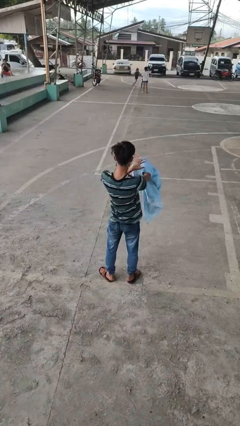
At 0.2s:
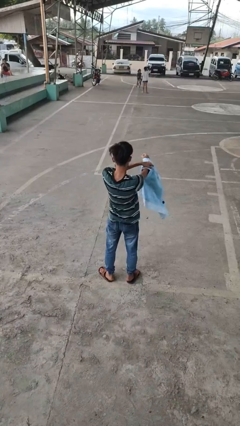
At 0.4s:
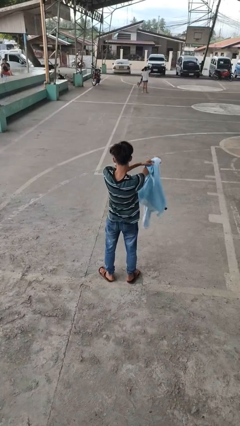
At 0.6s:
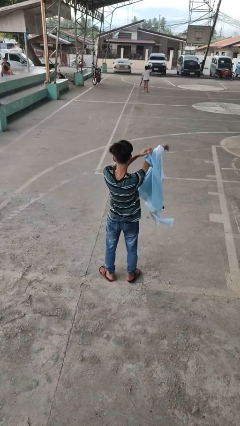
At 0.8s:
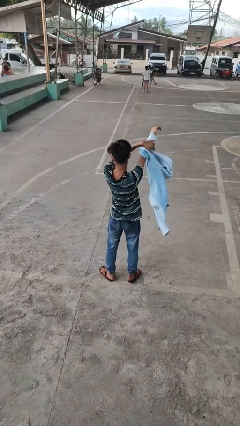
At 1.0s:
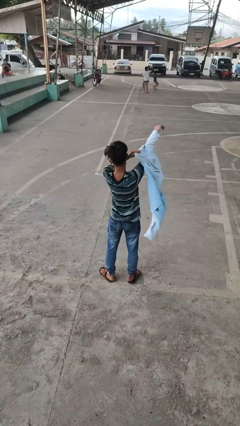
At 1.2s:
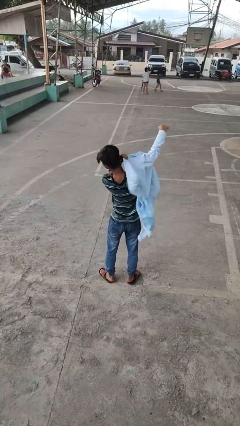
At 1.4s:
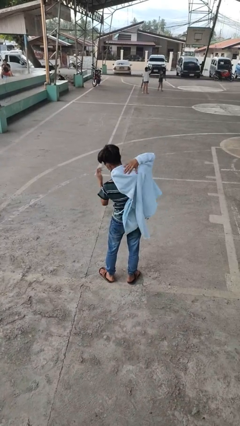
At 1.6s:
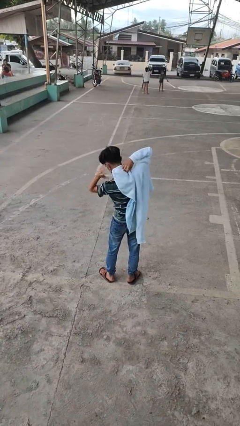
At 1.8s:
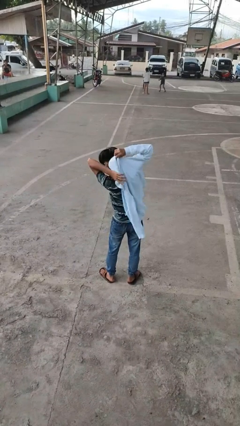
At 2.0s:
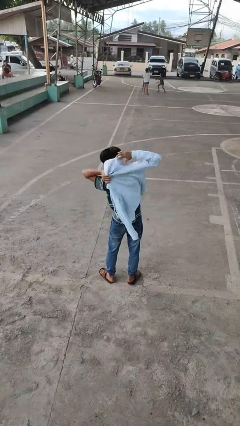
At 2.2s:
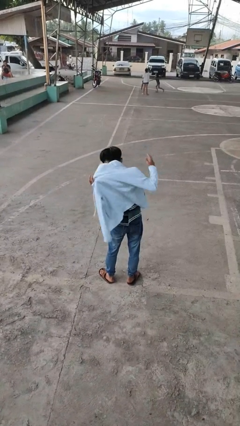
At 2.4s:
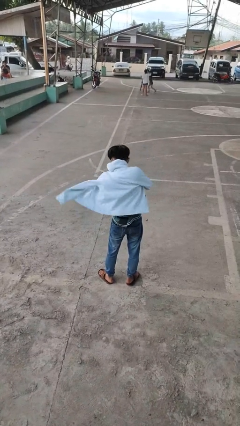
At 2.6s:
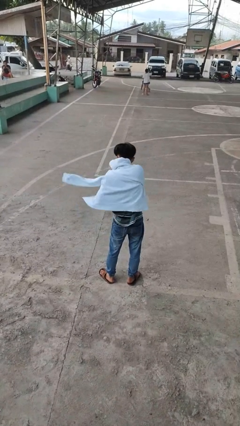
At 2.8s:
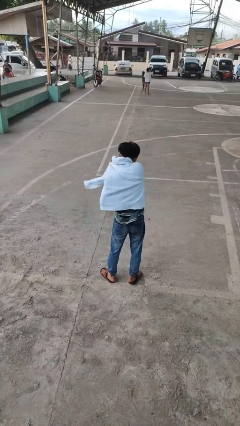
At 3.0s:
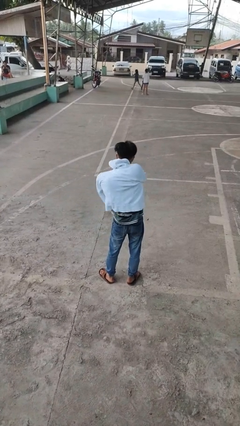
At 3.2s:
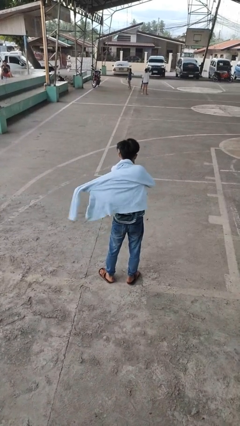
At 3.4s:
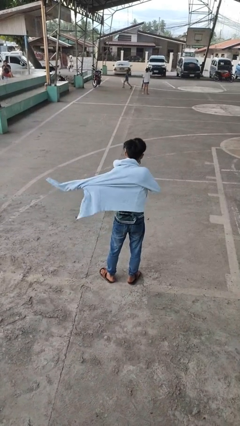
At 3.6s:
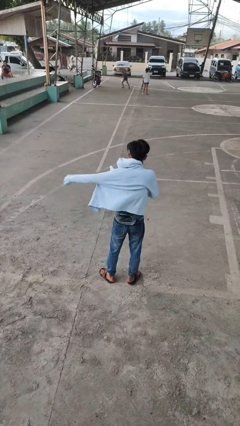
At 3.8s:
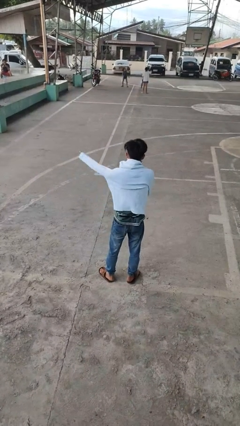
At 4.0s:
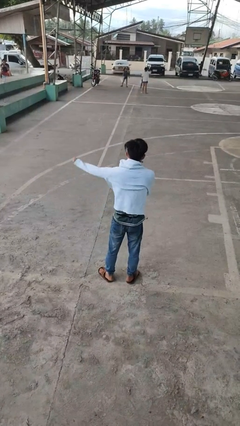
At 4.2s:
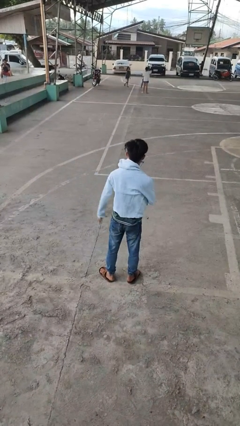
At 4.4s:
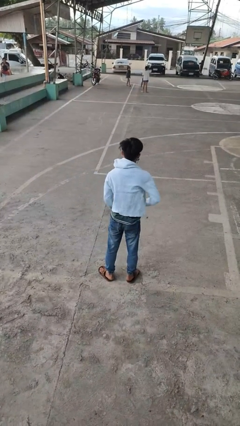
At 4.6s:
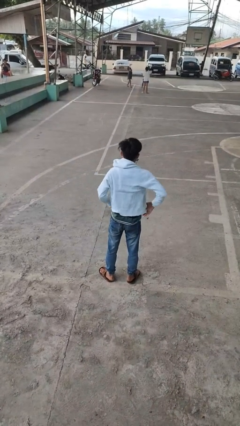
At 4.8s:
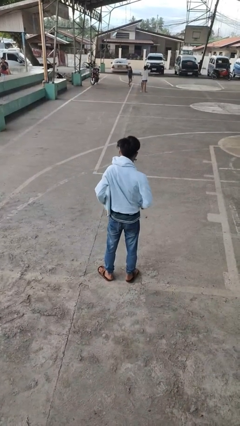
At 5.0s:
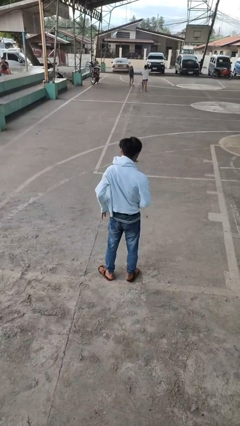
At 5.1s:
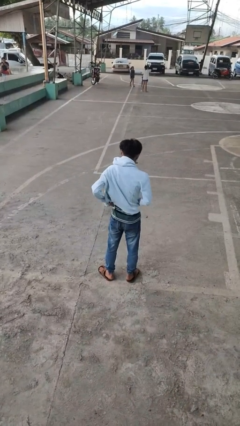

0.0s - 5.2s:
person puts on jacket

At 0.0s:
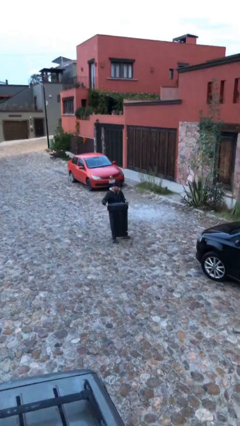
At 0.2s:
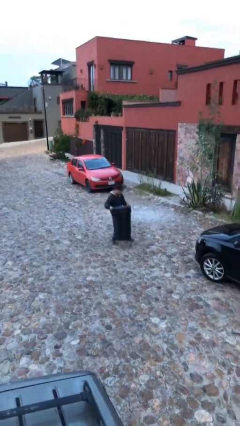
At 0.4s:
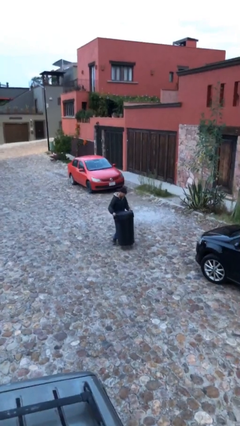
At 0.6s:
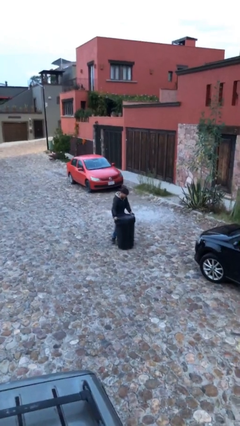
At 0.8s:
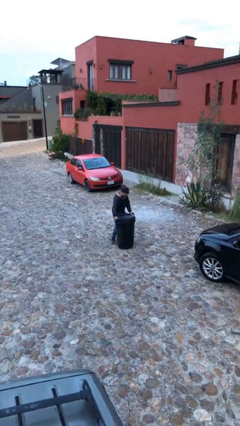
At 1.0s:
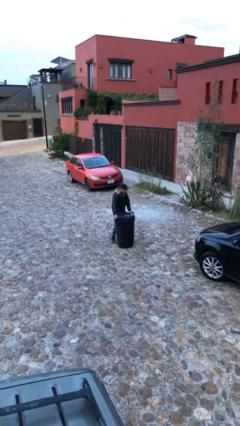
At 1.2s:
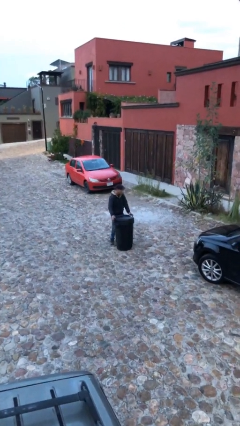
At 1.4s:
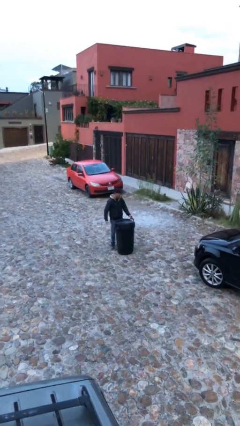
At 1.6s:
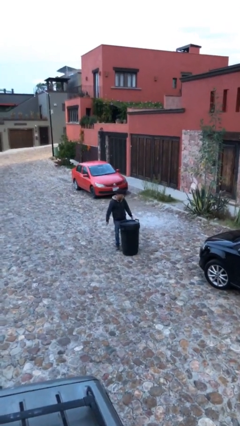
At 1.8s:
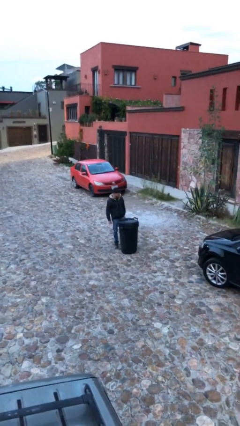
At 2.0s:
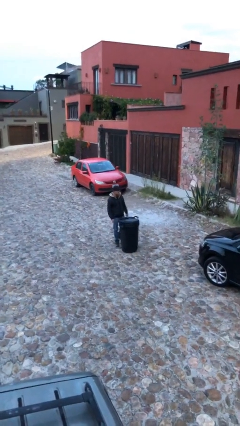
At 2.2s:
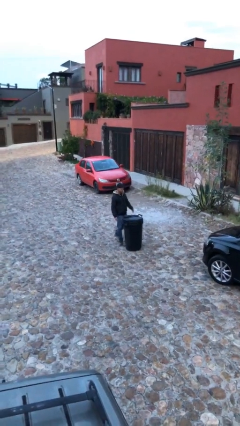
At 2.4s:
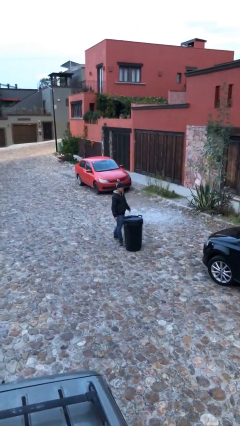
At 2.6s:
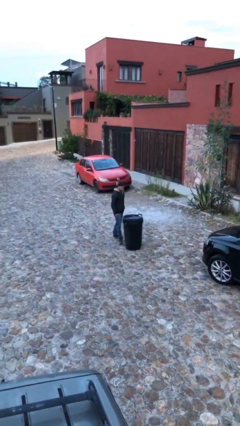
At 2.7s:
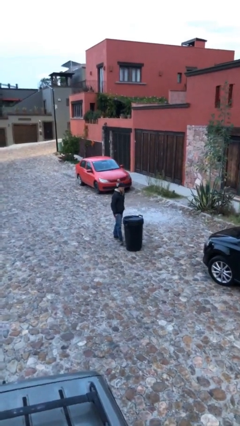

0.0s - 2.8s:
person puts down object on floor

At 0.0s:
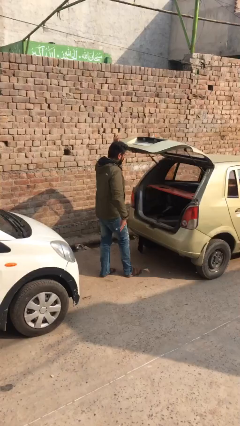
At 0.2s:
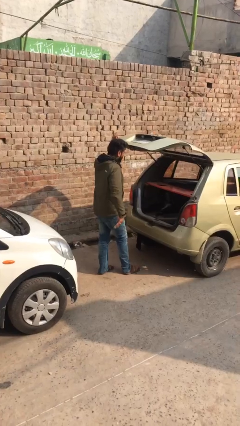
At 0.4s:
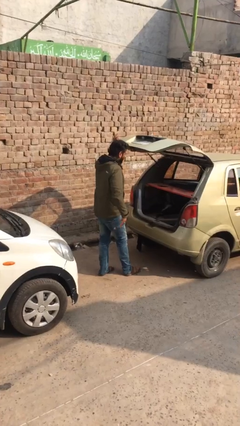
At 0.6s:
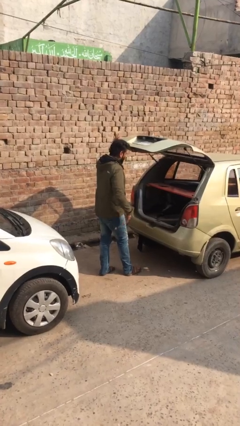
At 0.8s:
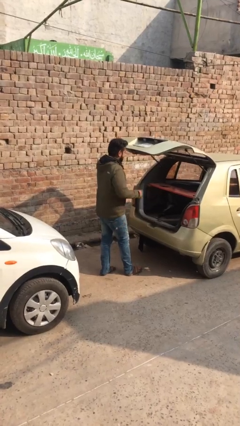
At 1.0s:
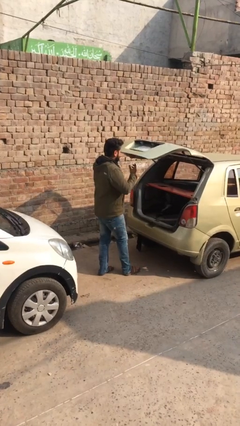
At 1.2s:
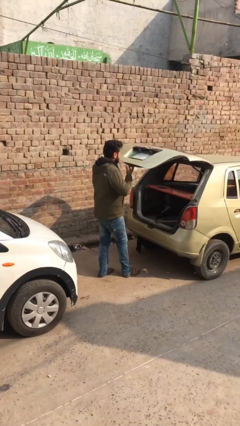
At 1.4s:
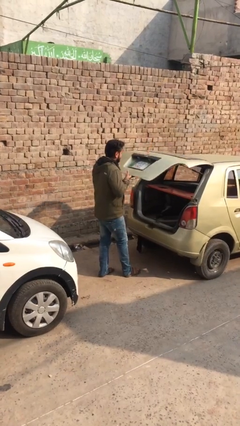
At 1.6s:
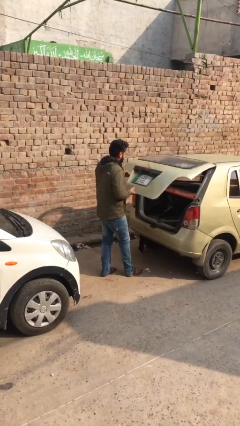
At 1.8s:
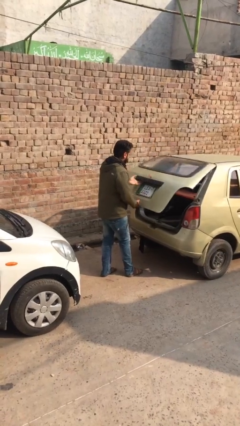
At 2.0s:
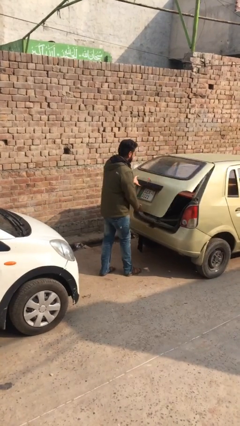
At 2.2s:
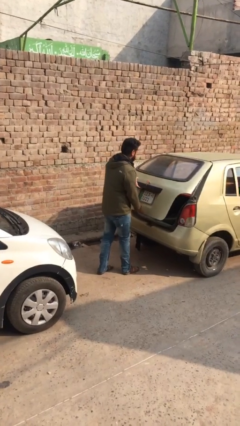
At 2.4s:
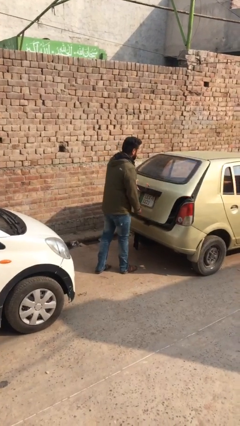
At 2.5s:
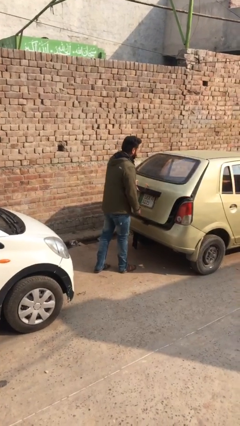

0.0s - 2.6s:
person closes car trunk

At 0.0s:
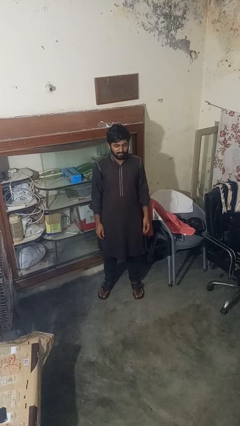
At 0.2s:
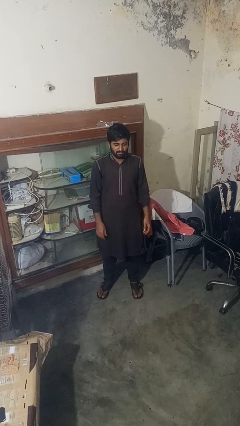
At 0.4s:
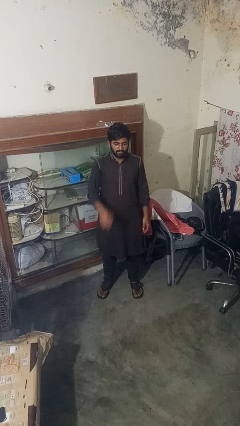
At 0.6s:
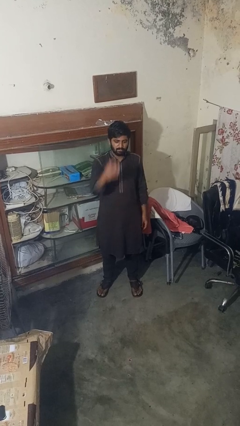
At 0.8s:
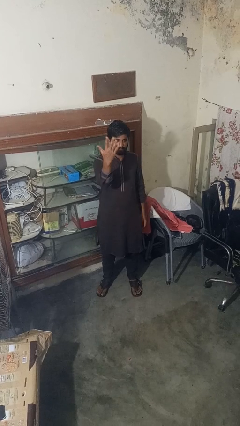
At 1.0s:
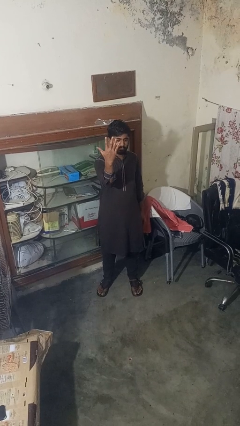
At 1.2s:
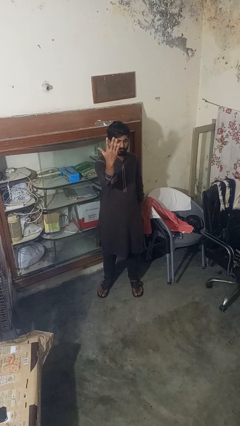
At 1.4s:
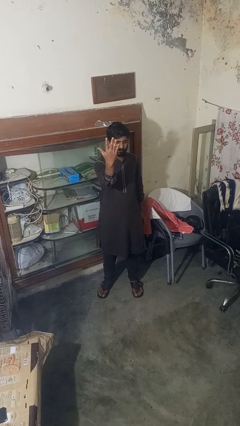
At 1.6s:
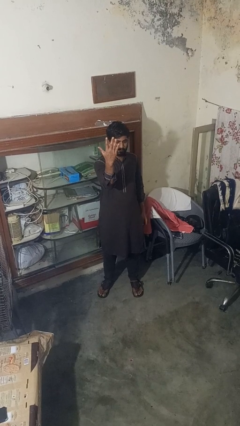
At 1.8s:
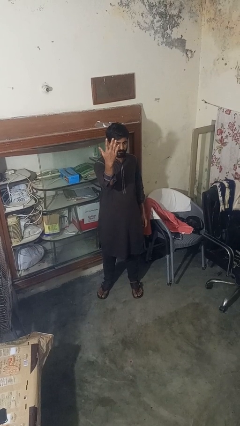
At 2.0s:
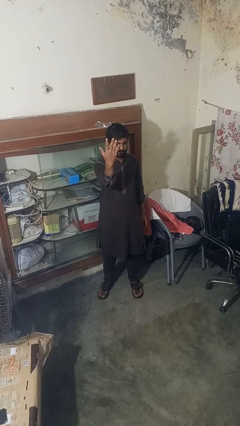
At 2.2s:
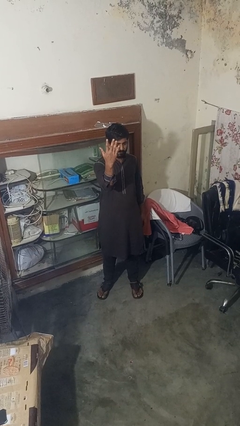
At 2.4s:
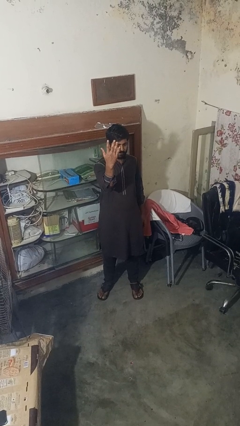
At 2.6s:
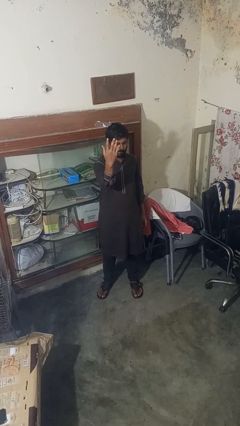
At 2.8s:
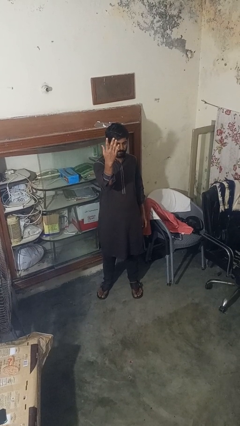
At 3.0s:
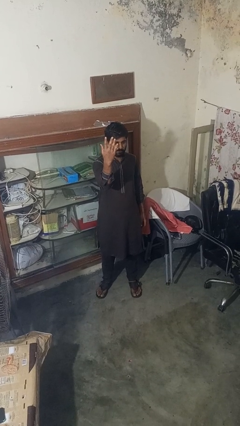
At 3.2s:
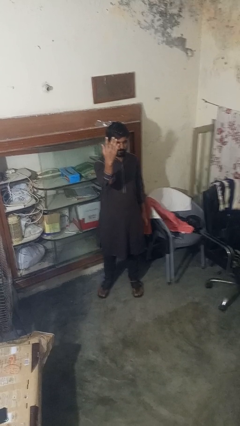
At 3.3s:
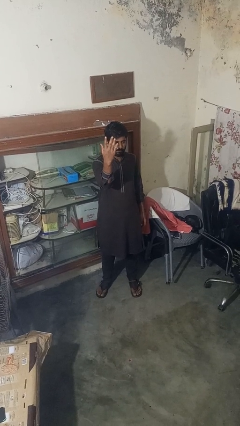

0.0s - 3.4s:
person gestures number five

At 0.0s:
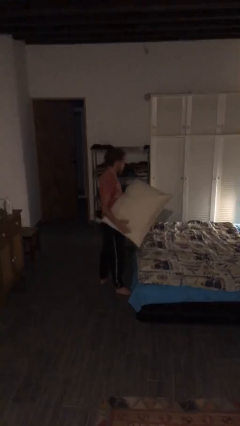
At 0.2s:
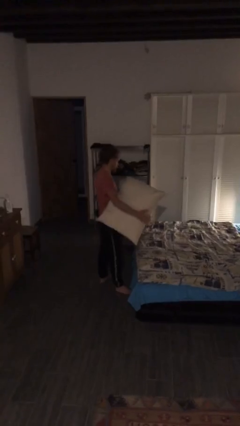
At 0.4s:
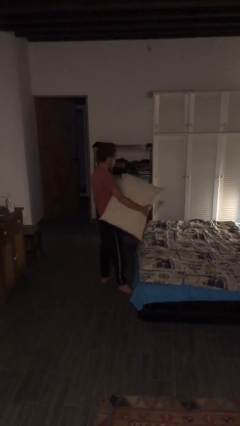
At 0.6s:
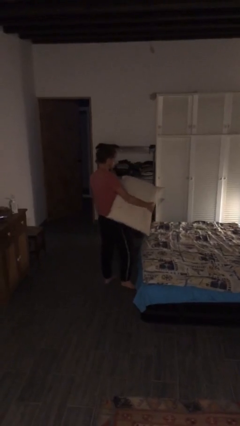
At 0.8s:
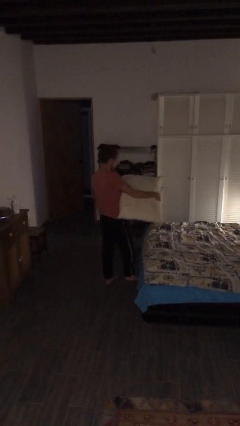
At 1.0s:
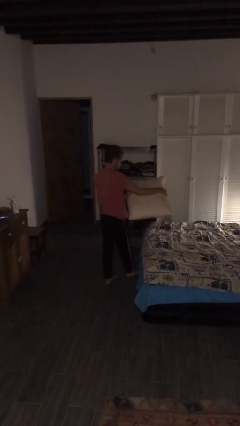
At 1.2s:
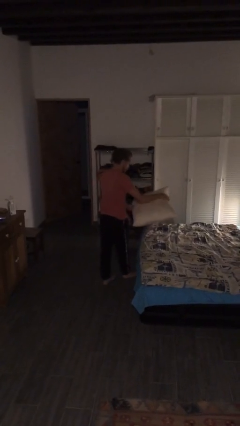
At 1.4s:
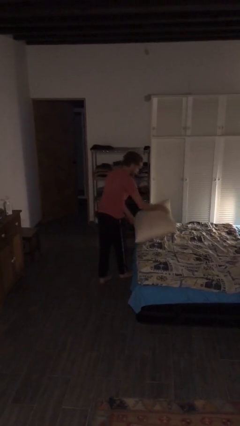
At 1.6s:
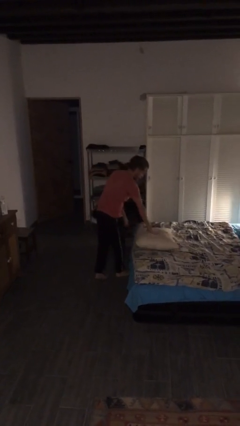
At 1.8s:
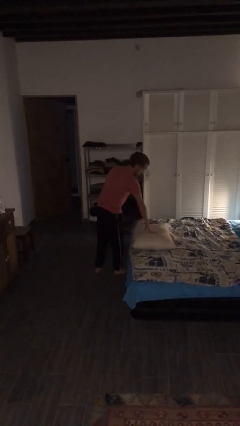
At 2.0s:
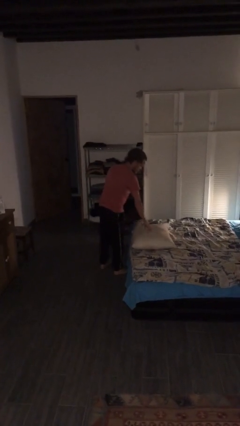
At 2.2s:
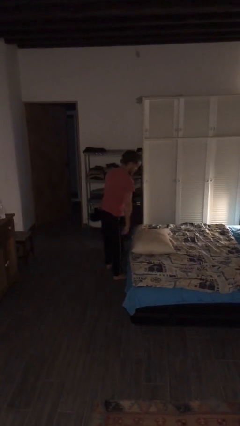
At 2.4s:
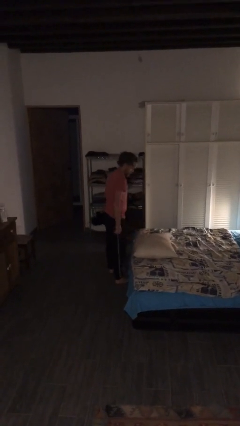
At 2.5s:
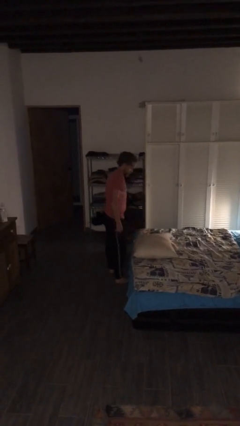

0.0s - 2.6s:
person puts down object on bed

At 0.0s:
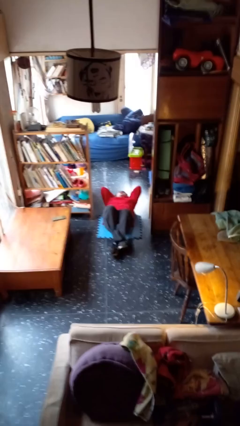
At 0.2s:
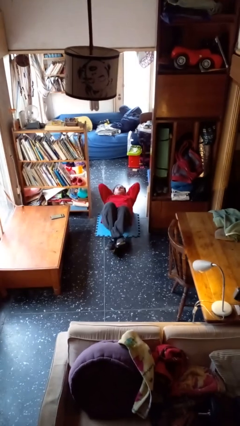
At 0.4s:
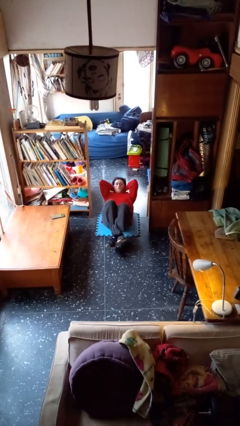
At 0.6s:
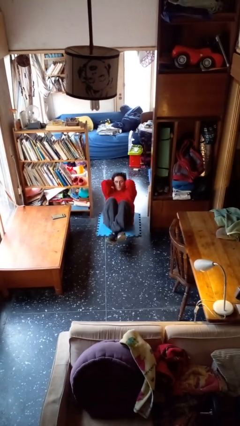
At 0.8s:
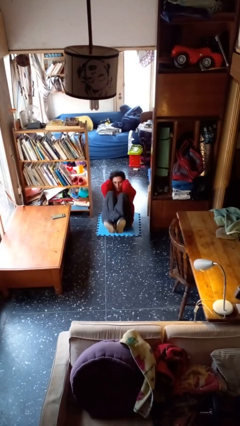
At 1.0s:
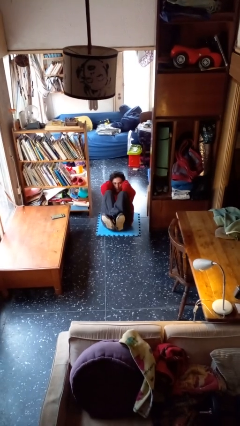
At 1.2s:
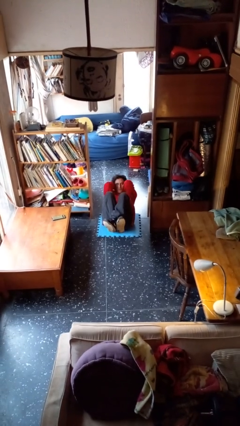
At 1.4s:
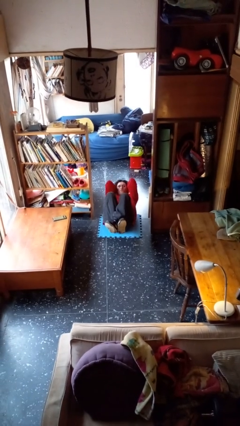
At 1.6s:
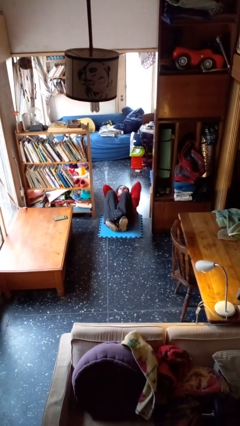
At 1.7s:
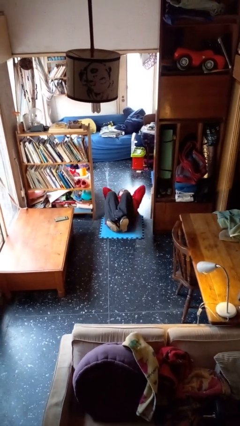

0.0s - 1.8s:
person exercises with situp
